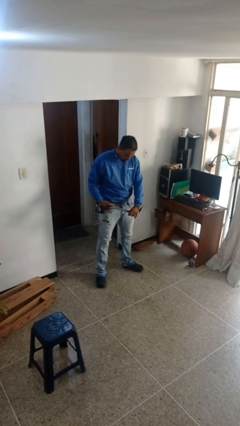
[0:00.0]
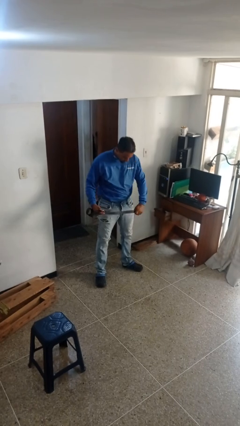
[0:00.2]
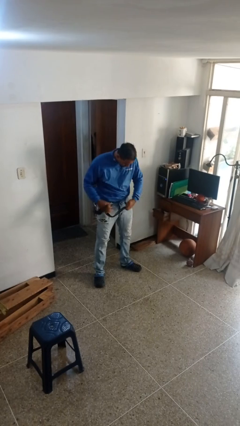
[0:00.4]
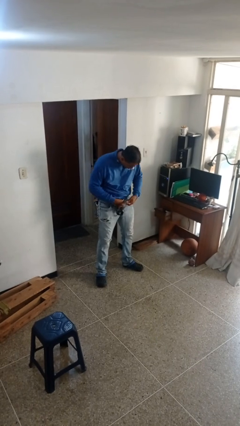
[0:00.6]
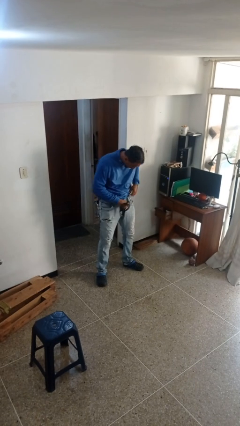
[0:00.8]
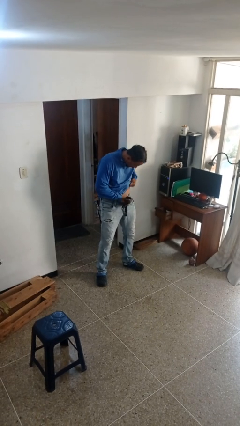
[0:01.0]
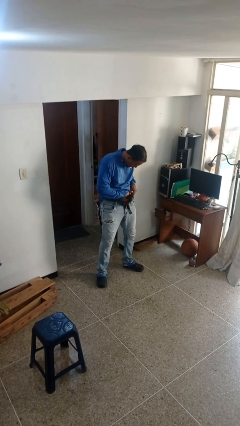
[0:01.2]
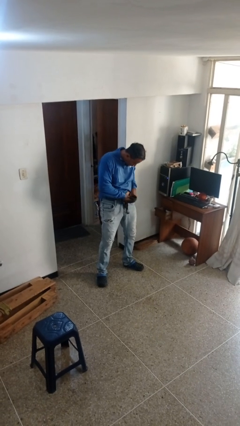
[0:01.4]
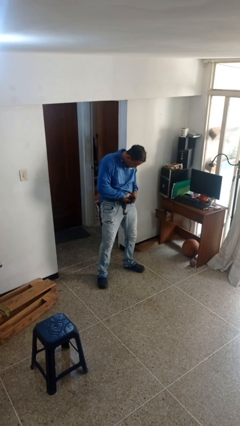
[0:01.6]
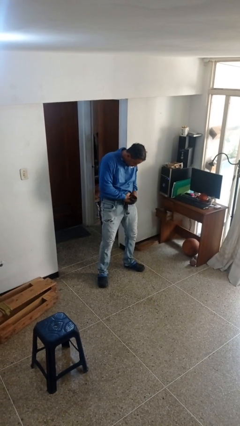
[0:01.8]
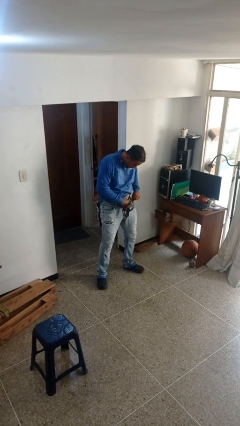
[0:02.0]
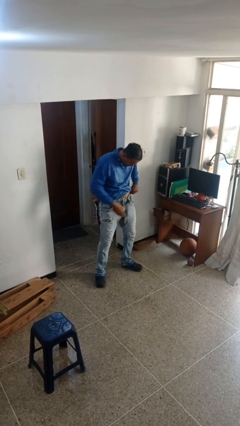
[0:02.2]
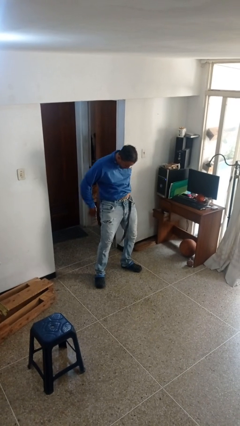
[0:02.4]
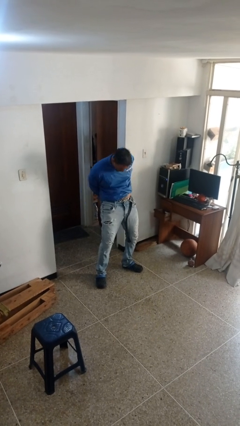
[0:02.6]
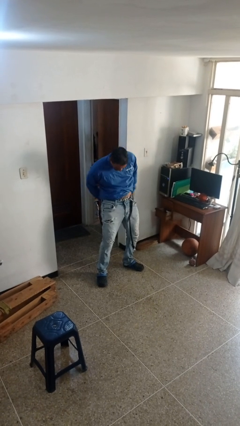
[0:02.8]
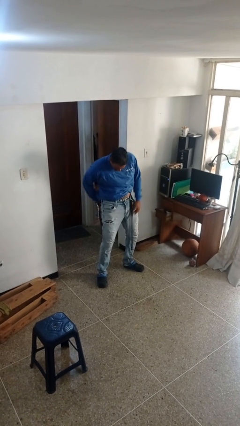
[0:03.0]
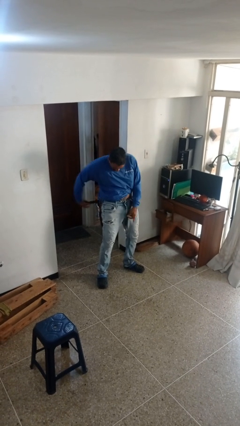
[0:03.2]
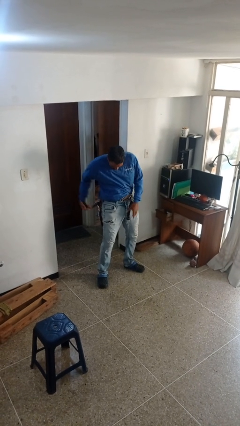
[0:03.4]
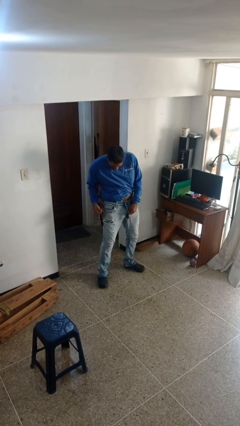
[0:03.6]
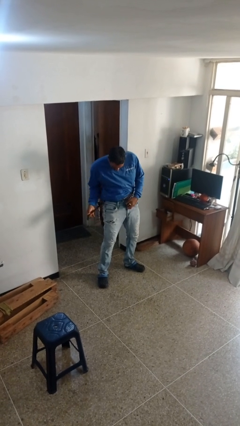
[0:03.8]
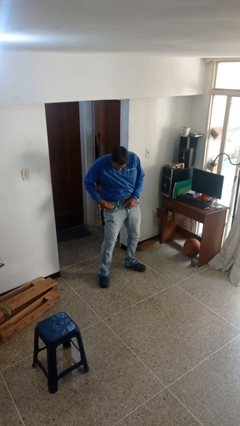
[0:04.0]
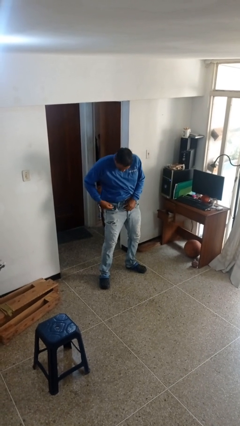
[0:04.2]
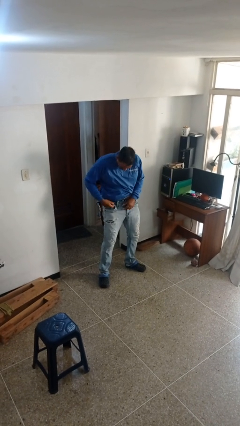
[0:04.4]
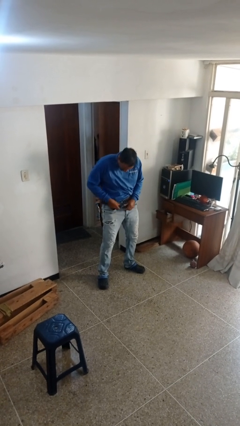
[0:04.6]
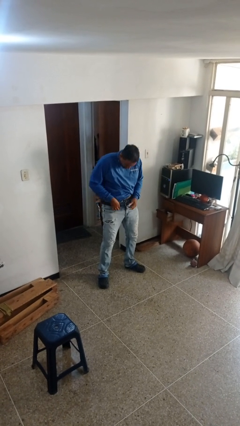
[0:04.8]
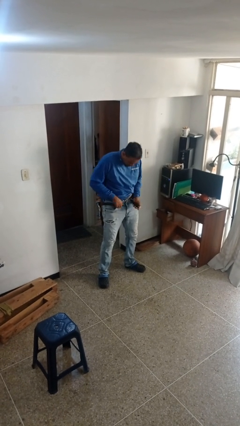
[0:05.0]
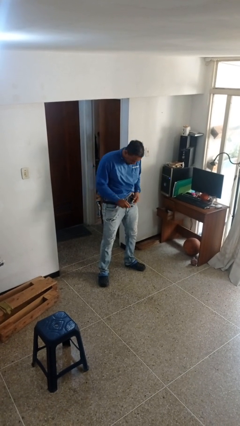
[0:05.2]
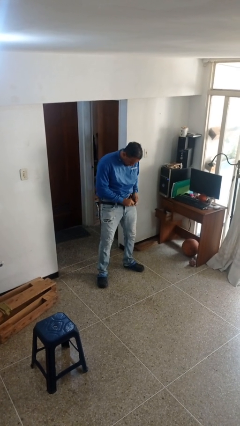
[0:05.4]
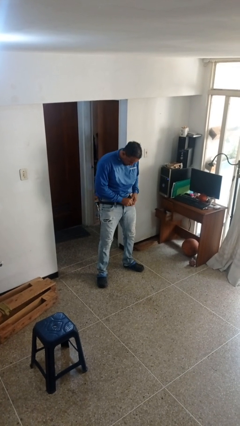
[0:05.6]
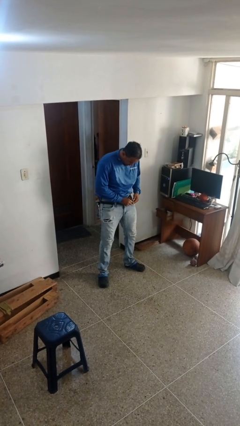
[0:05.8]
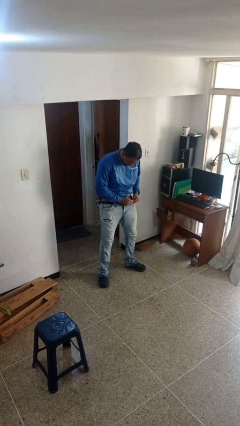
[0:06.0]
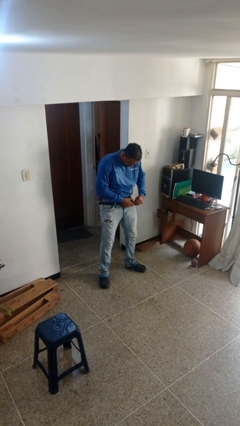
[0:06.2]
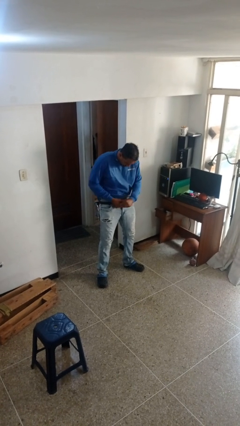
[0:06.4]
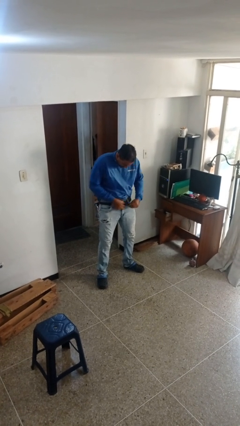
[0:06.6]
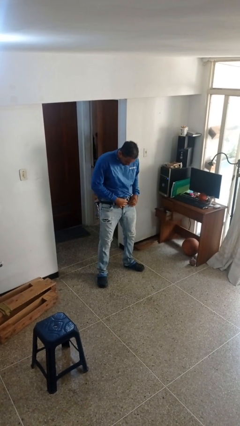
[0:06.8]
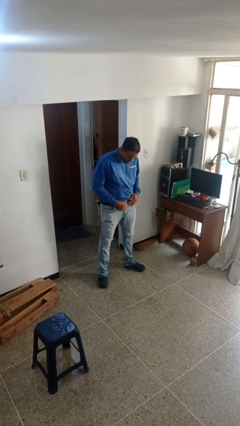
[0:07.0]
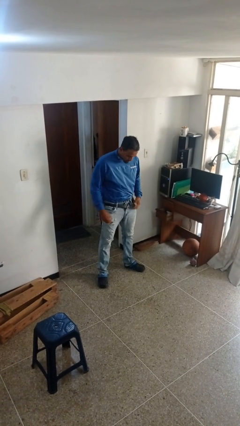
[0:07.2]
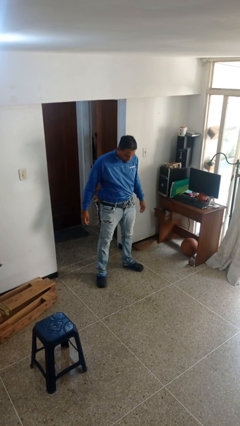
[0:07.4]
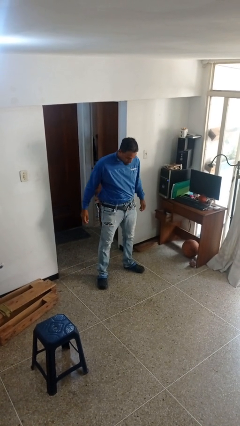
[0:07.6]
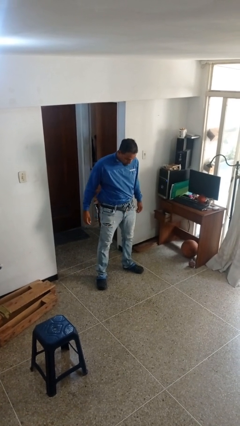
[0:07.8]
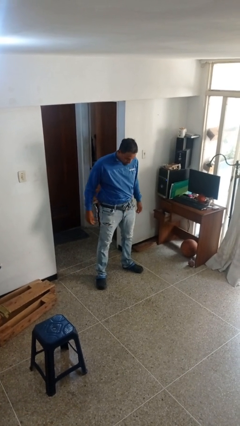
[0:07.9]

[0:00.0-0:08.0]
person puts on belt

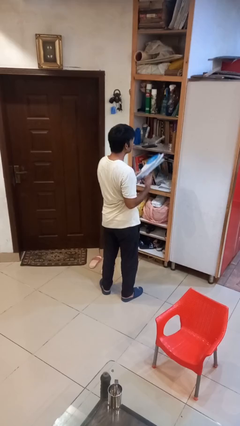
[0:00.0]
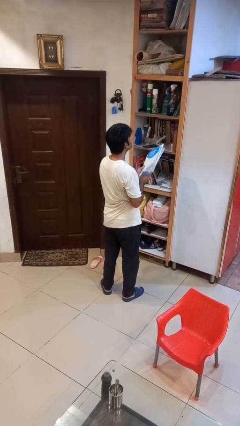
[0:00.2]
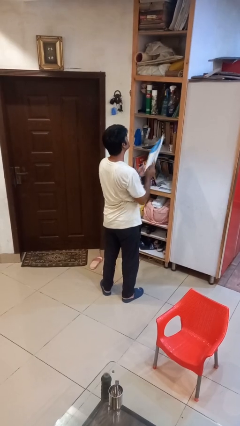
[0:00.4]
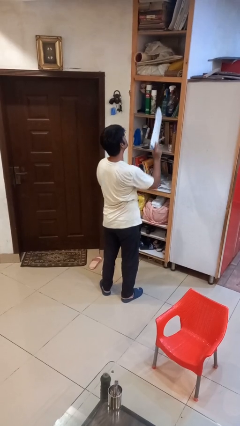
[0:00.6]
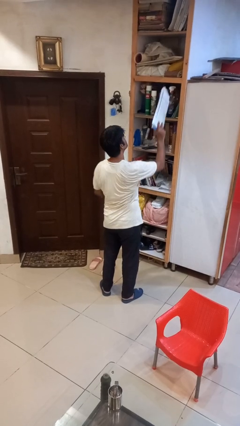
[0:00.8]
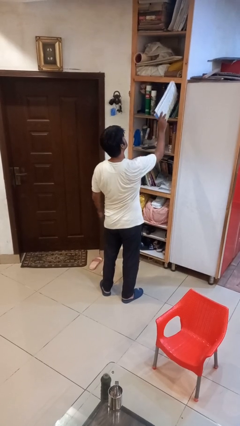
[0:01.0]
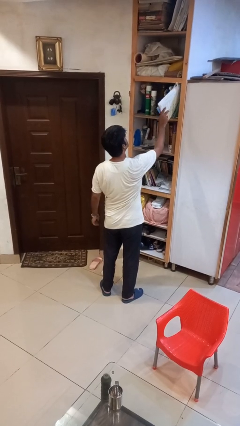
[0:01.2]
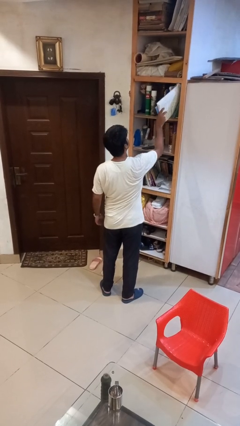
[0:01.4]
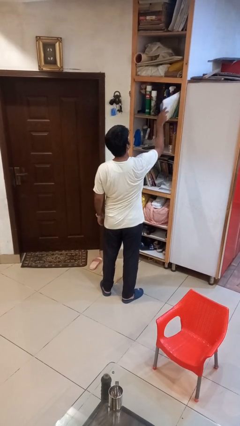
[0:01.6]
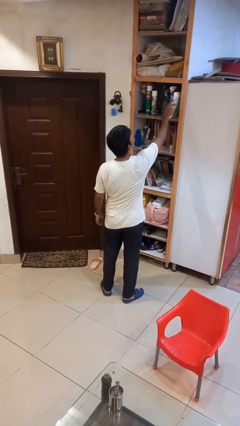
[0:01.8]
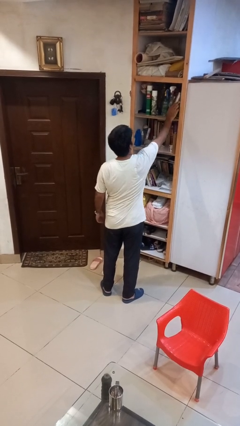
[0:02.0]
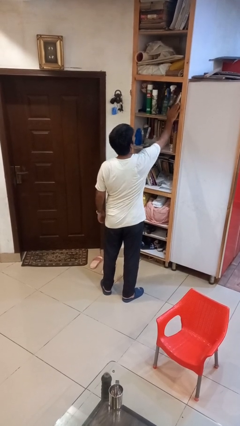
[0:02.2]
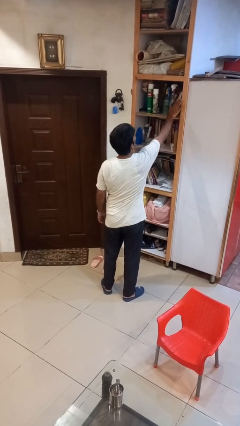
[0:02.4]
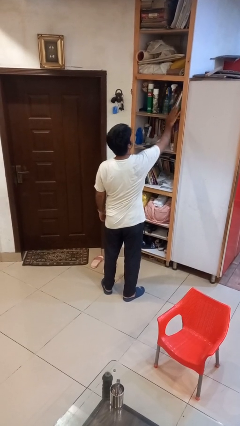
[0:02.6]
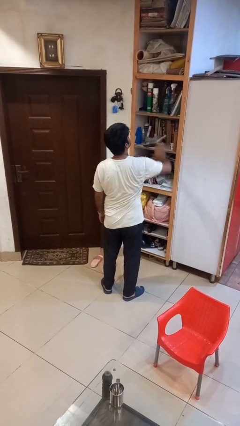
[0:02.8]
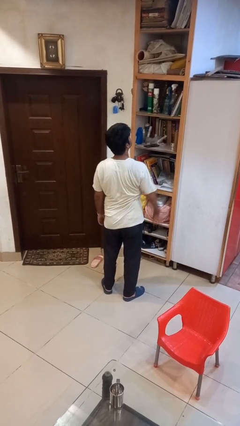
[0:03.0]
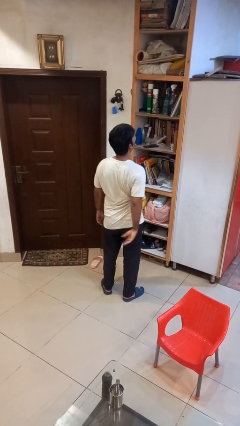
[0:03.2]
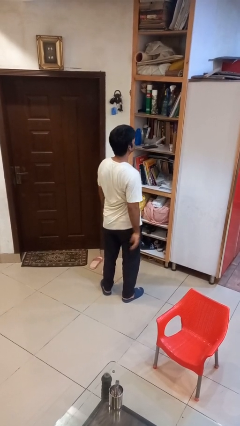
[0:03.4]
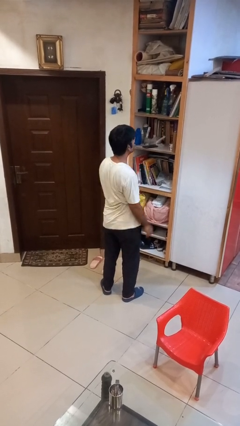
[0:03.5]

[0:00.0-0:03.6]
person puts down object on shelf

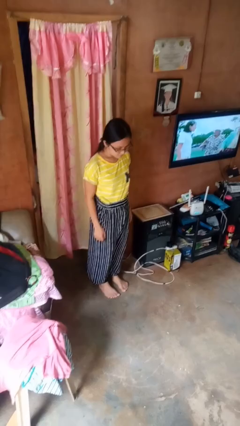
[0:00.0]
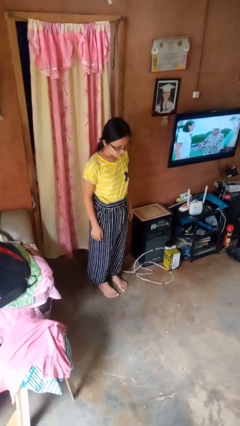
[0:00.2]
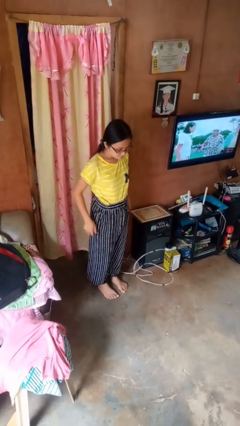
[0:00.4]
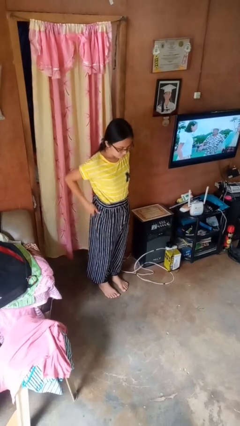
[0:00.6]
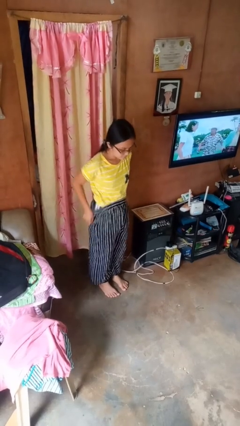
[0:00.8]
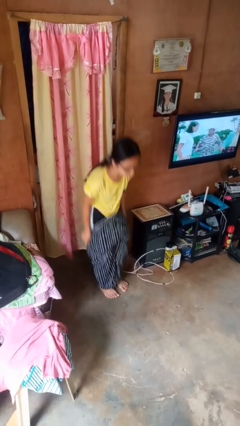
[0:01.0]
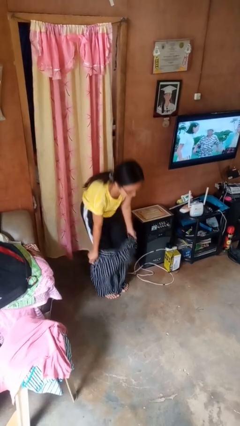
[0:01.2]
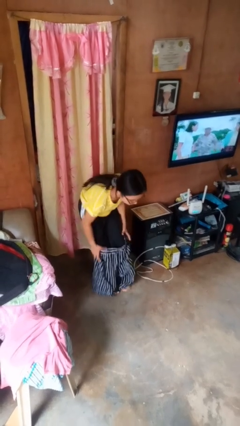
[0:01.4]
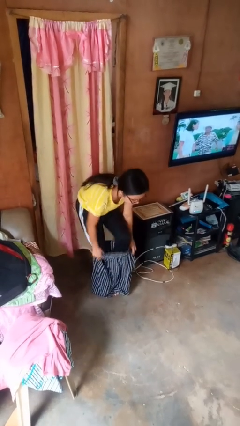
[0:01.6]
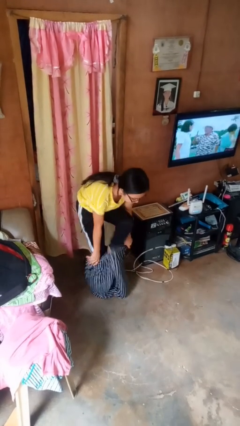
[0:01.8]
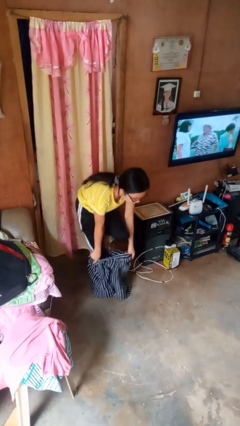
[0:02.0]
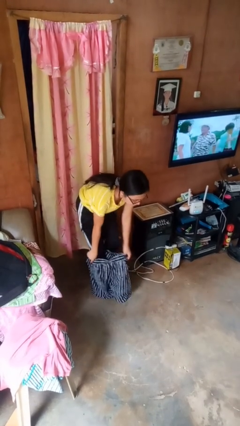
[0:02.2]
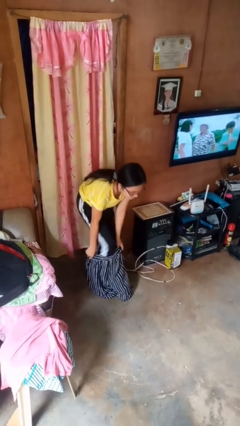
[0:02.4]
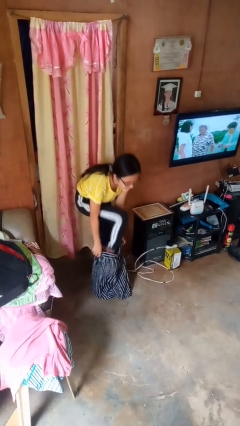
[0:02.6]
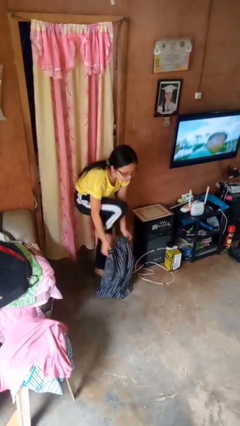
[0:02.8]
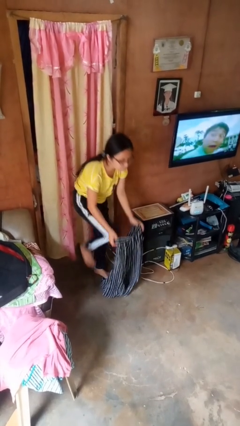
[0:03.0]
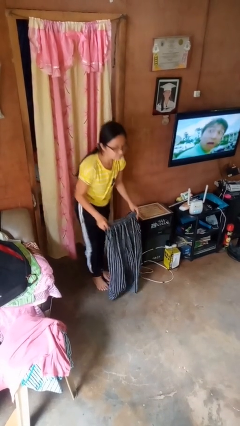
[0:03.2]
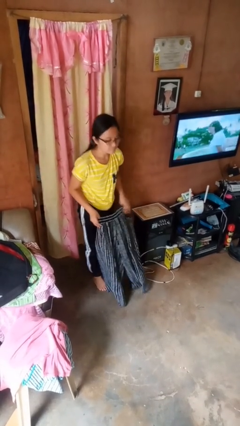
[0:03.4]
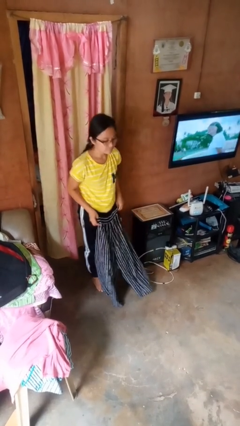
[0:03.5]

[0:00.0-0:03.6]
person takes off pants

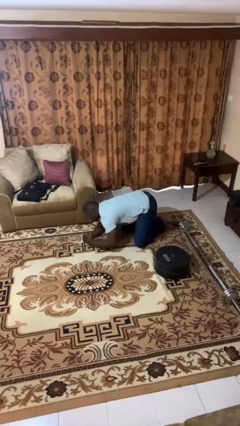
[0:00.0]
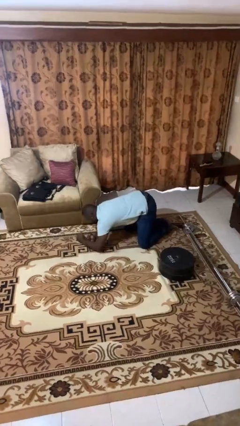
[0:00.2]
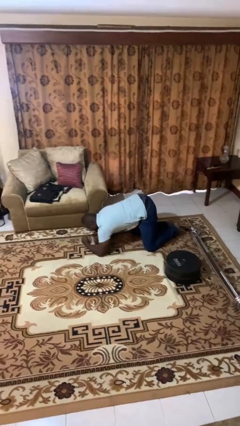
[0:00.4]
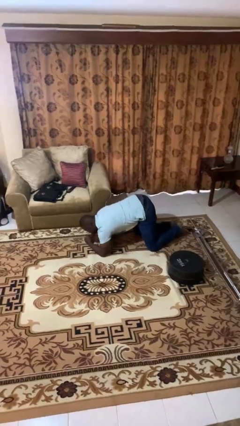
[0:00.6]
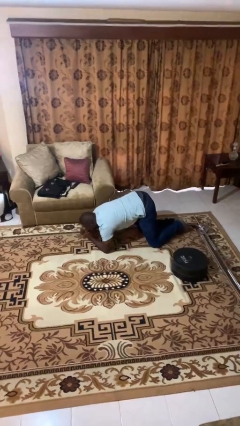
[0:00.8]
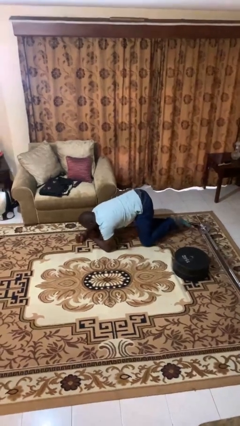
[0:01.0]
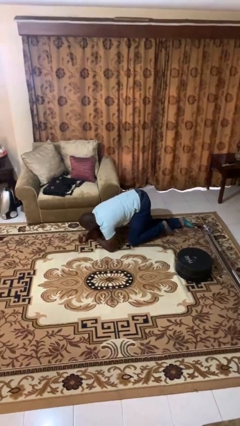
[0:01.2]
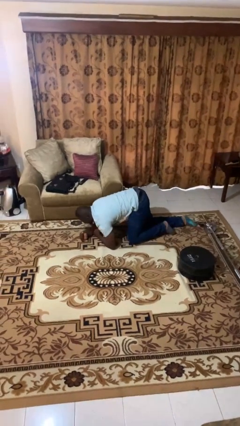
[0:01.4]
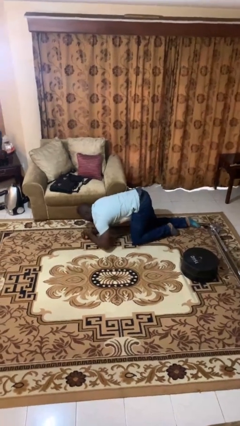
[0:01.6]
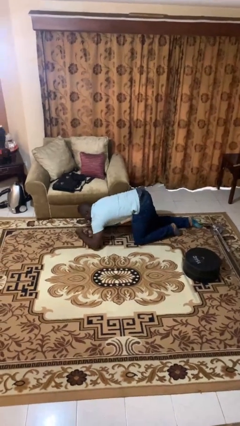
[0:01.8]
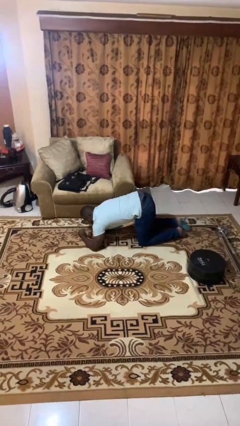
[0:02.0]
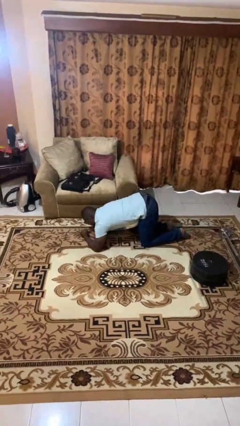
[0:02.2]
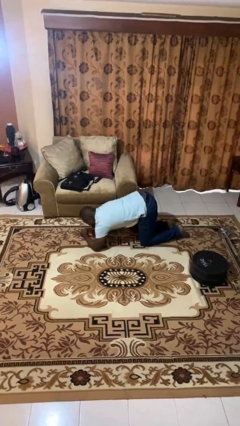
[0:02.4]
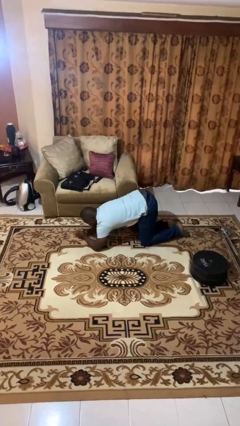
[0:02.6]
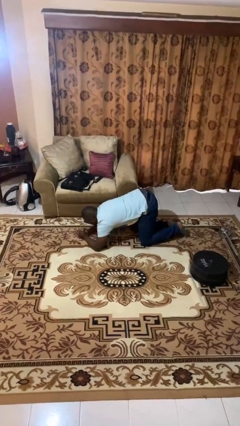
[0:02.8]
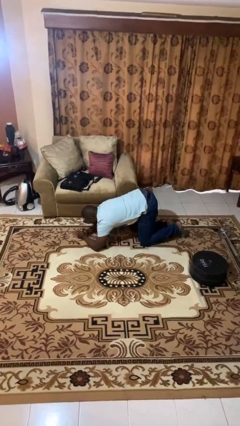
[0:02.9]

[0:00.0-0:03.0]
person crawls
